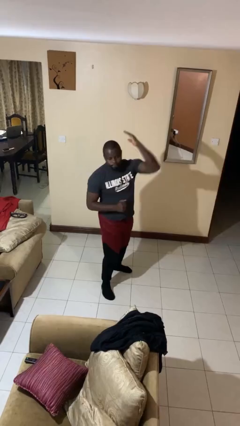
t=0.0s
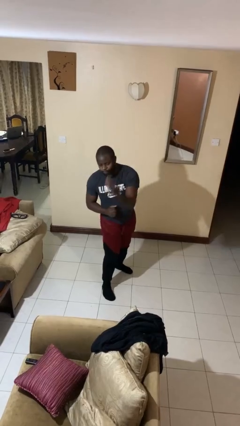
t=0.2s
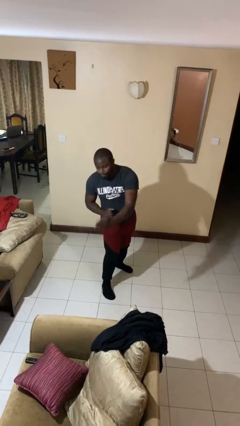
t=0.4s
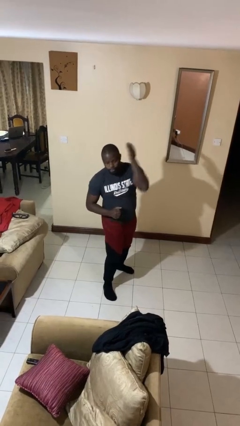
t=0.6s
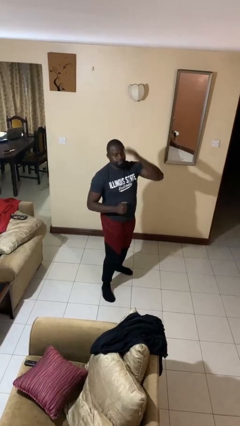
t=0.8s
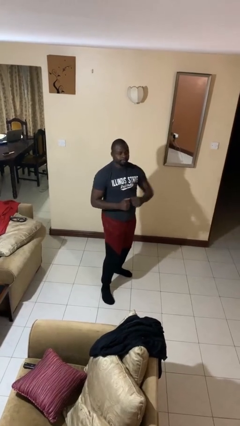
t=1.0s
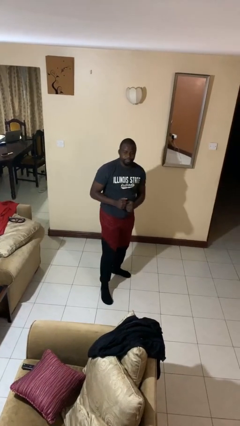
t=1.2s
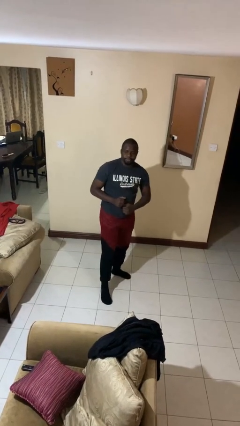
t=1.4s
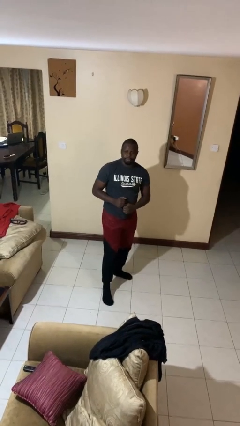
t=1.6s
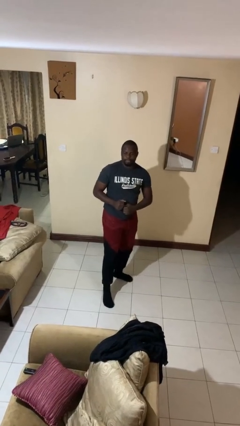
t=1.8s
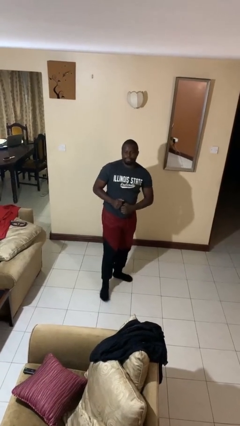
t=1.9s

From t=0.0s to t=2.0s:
person karate chop

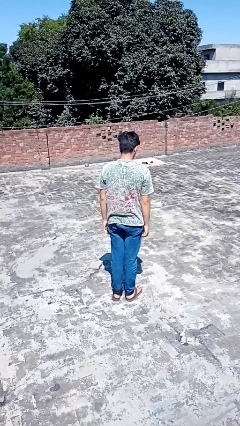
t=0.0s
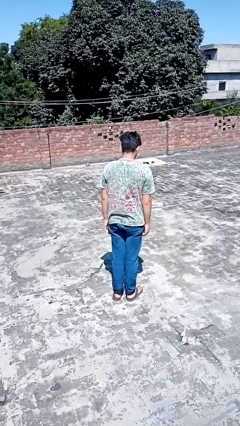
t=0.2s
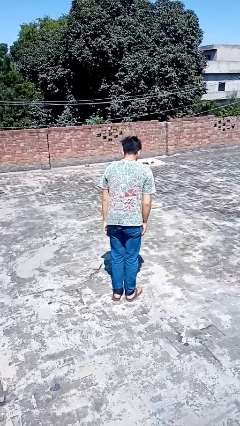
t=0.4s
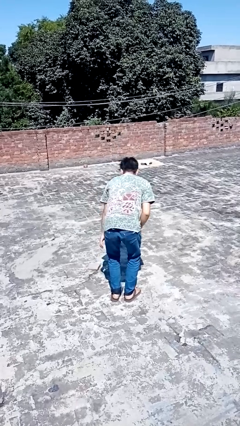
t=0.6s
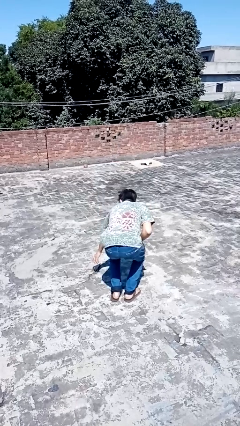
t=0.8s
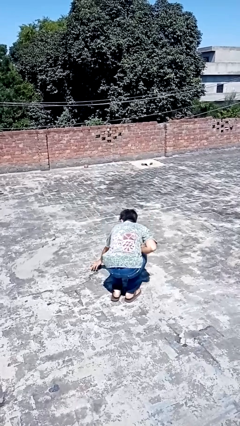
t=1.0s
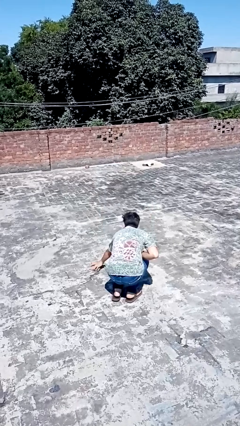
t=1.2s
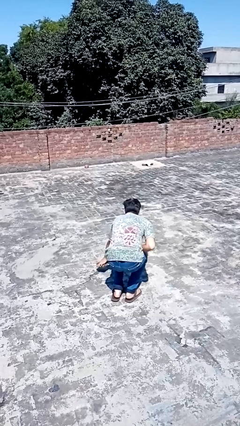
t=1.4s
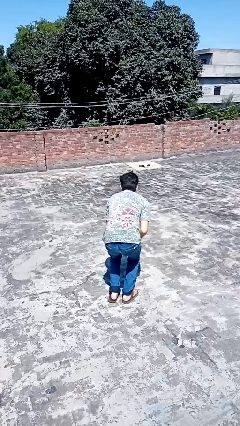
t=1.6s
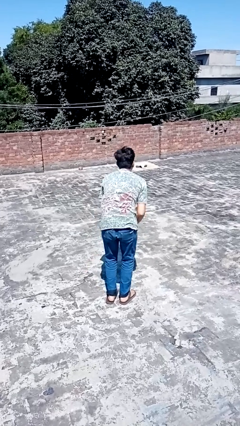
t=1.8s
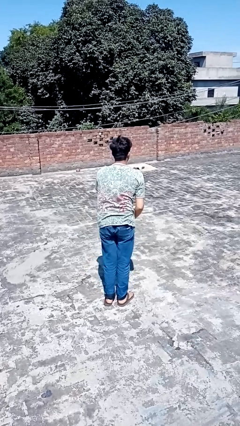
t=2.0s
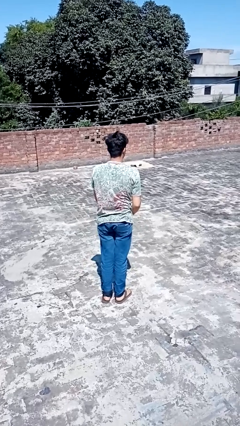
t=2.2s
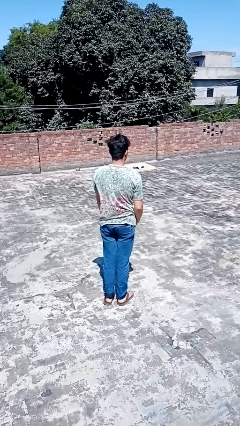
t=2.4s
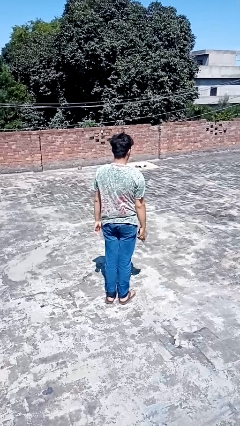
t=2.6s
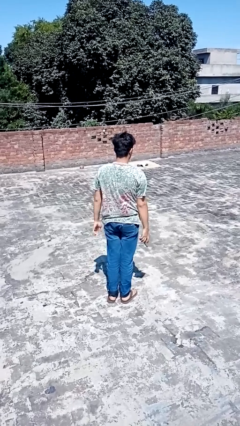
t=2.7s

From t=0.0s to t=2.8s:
person picks up object from floor

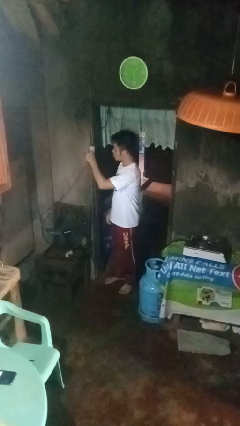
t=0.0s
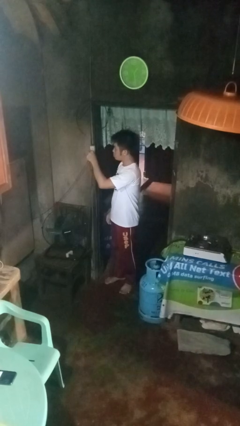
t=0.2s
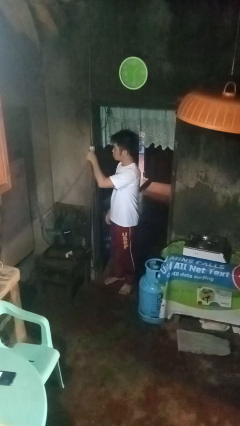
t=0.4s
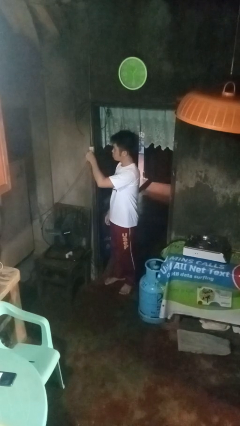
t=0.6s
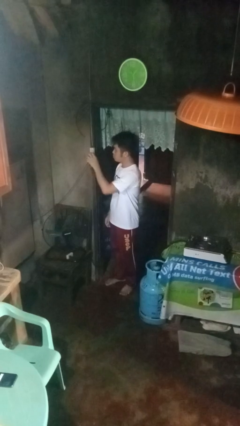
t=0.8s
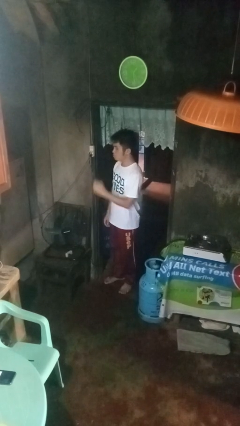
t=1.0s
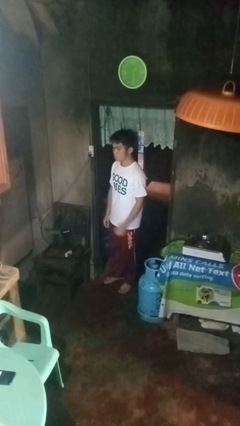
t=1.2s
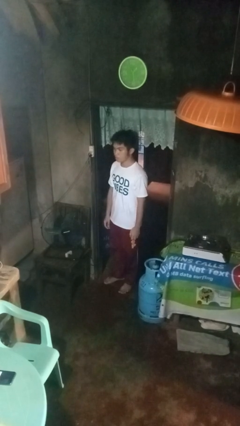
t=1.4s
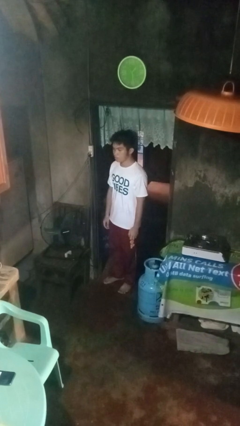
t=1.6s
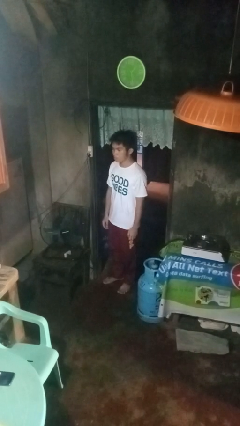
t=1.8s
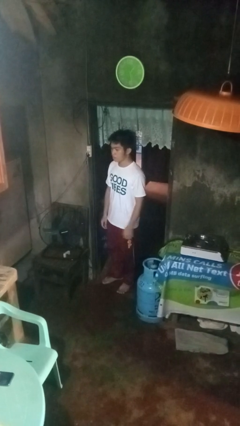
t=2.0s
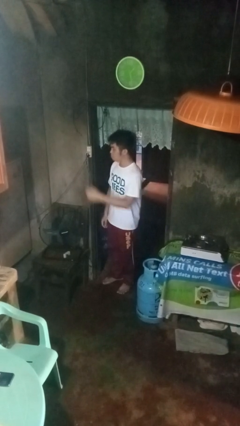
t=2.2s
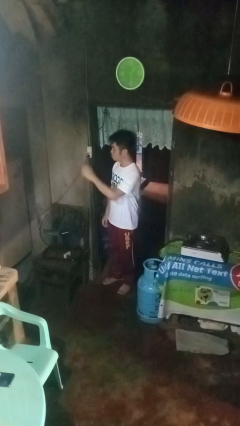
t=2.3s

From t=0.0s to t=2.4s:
person plugs into electrical socket

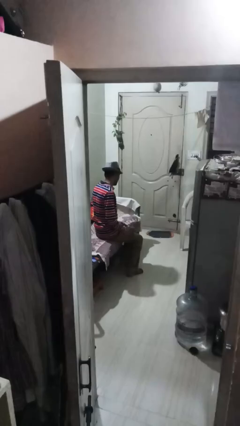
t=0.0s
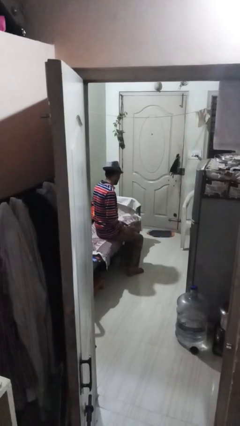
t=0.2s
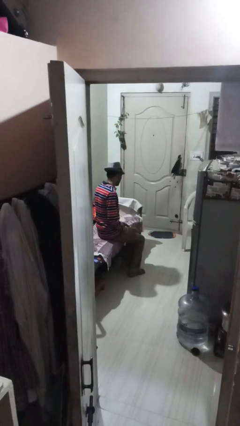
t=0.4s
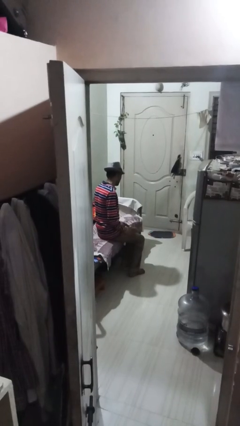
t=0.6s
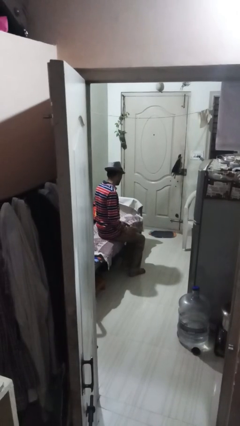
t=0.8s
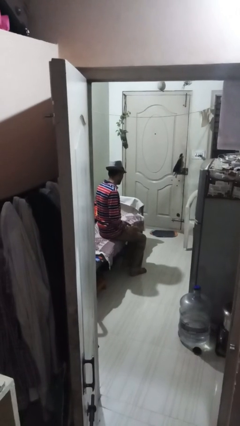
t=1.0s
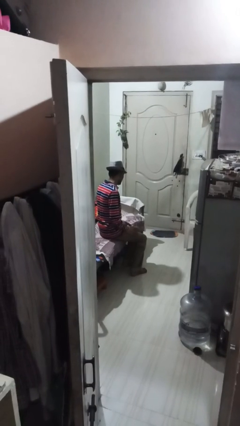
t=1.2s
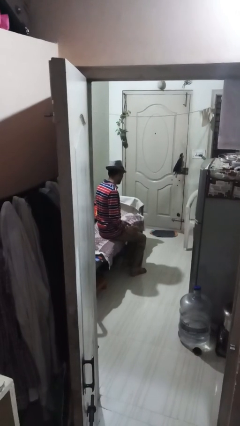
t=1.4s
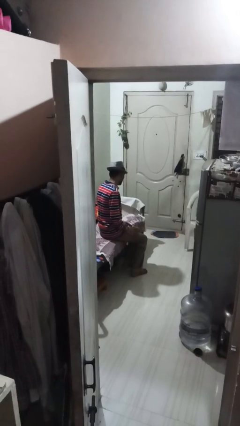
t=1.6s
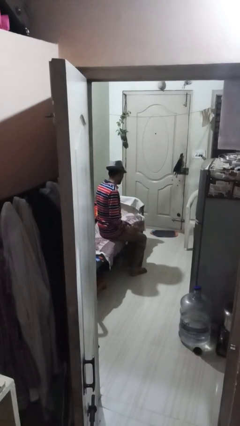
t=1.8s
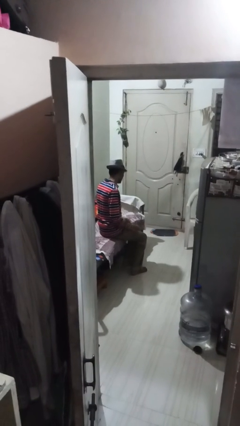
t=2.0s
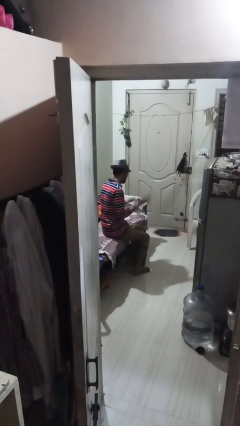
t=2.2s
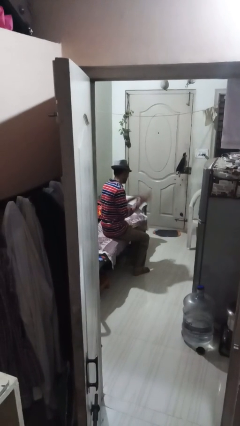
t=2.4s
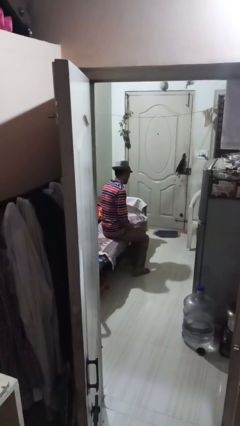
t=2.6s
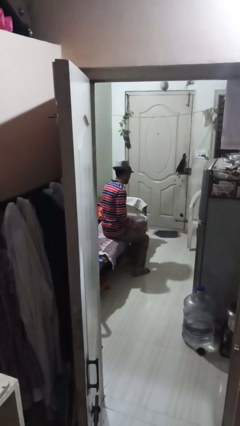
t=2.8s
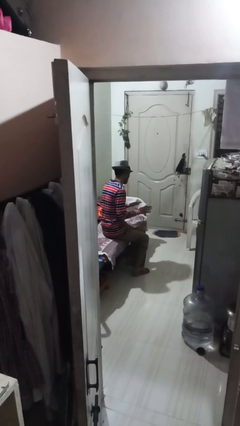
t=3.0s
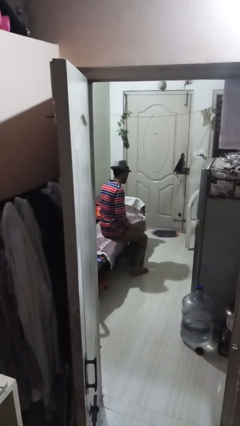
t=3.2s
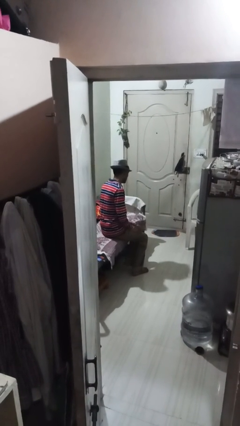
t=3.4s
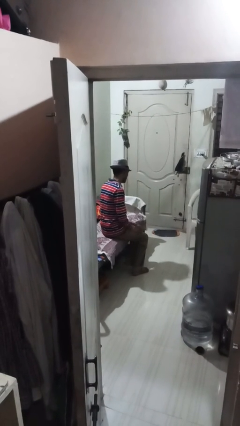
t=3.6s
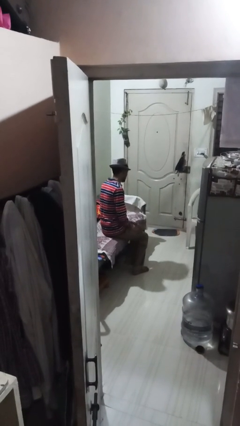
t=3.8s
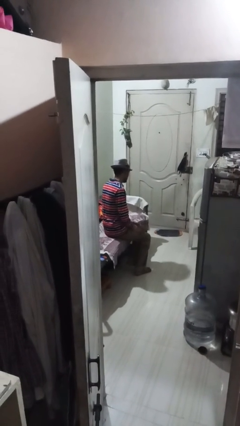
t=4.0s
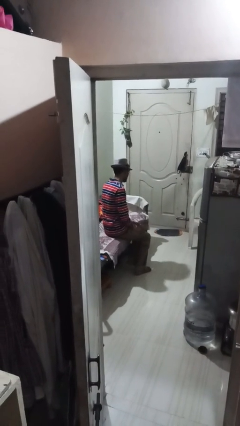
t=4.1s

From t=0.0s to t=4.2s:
person slaps hands on thighs

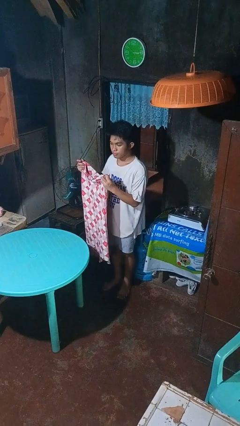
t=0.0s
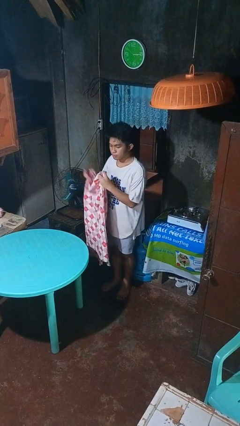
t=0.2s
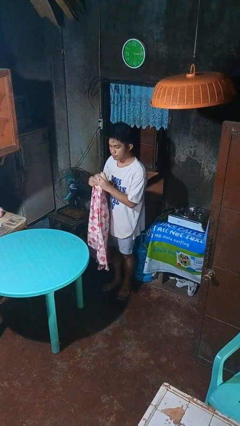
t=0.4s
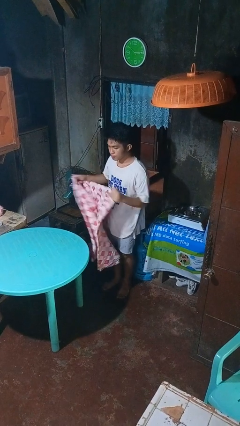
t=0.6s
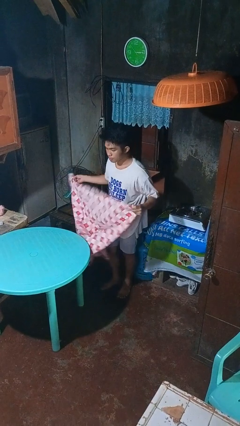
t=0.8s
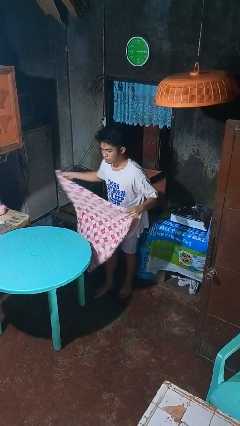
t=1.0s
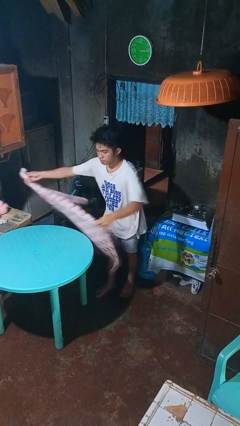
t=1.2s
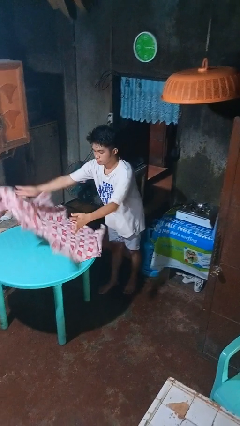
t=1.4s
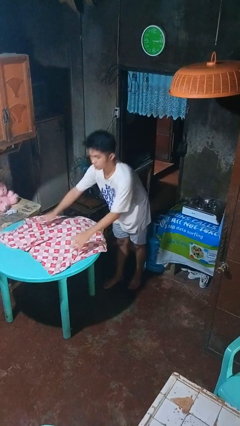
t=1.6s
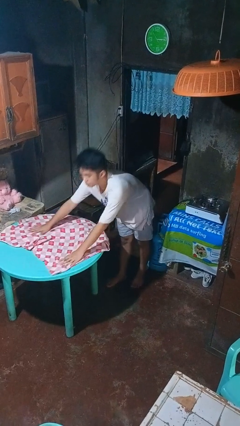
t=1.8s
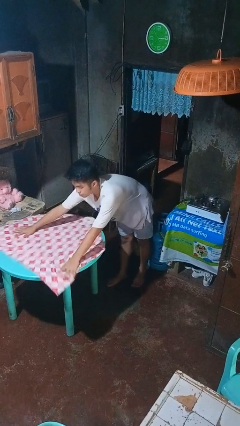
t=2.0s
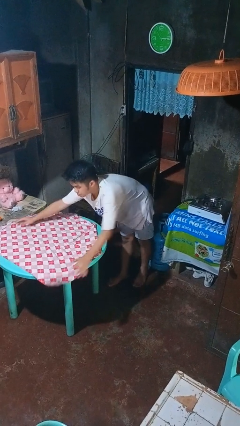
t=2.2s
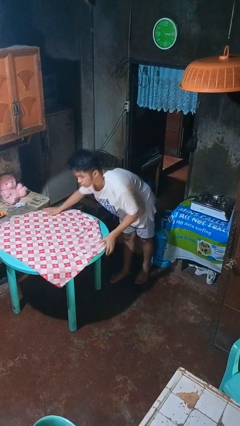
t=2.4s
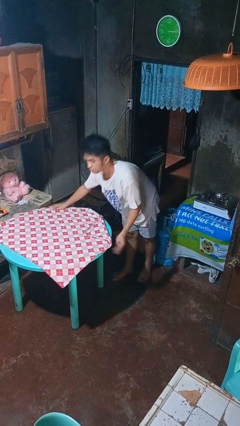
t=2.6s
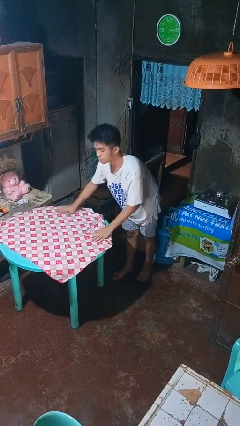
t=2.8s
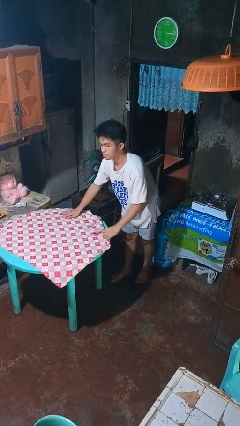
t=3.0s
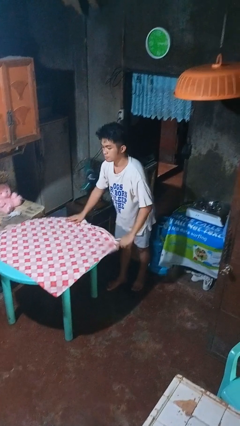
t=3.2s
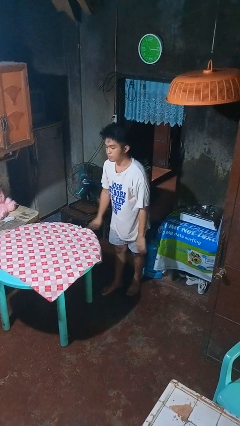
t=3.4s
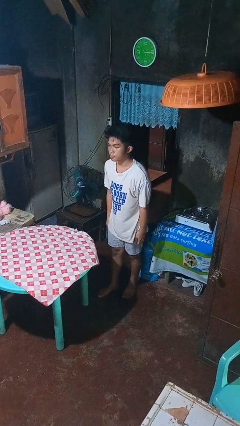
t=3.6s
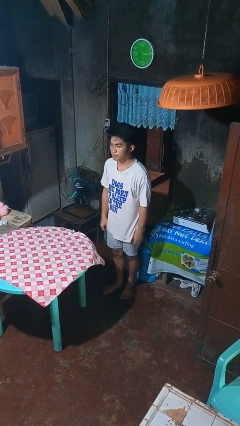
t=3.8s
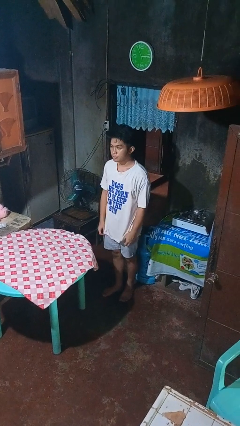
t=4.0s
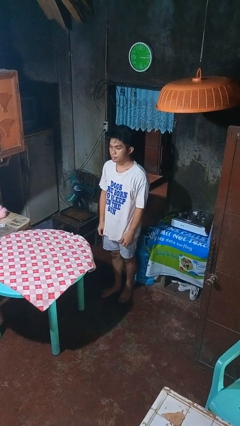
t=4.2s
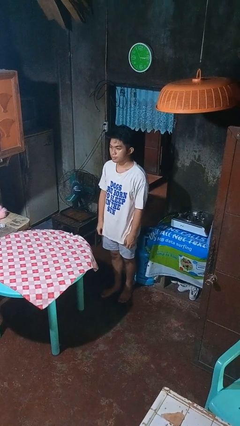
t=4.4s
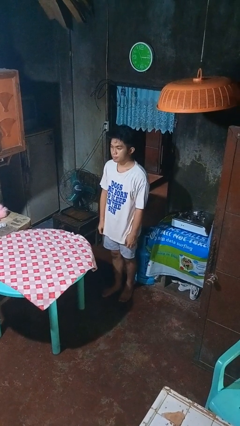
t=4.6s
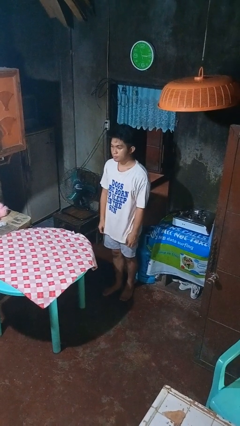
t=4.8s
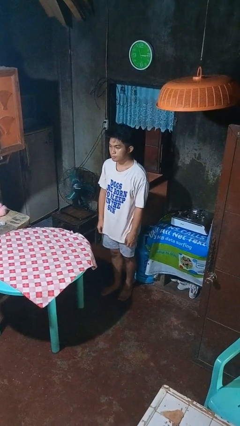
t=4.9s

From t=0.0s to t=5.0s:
person spreads tablecloth

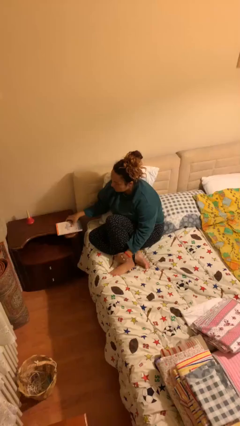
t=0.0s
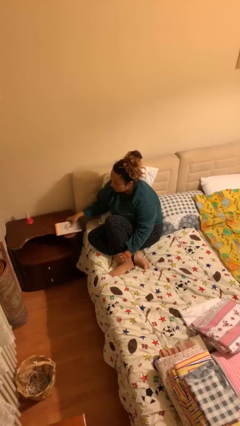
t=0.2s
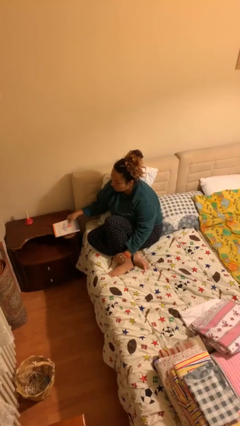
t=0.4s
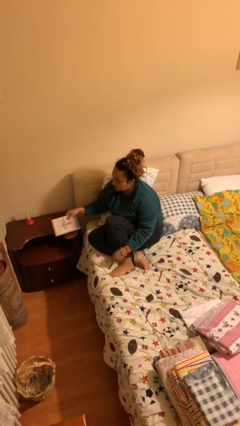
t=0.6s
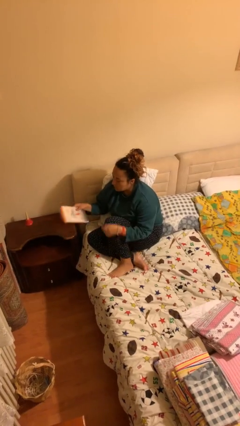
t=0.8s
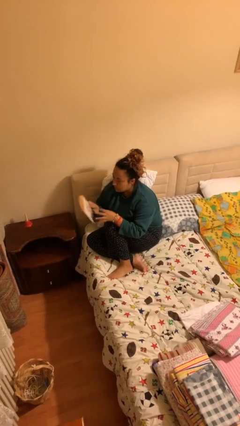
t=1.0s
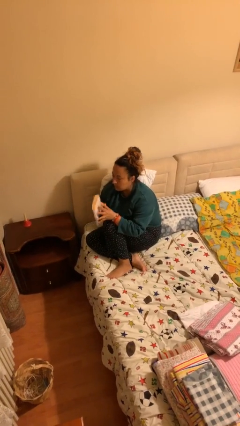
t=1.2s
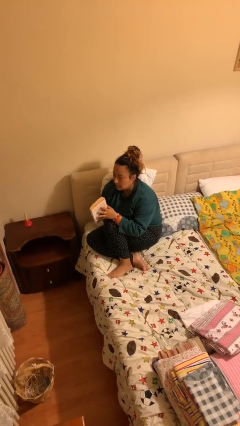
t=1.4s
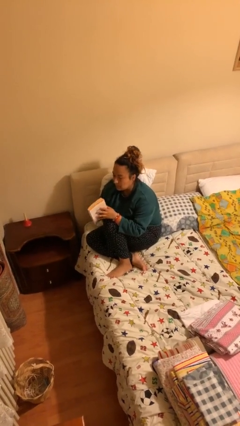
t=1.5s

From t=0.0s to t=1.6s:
person picks up object from table
